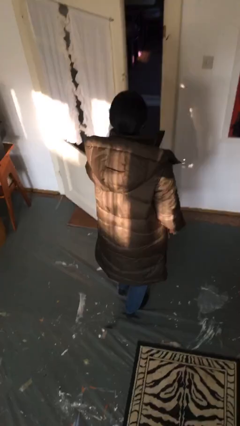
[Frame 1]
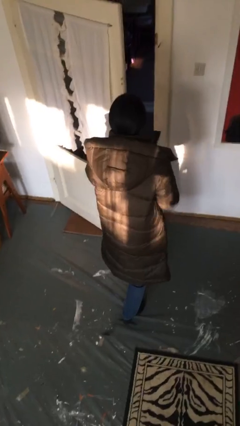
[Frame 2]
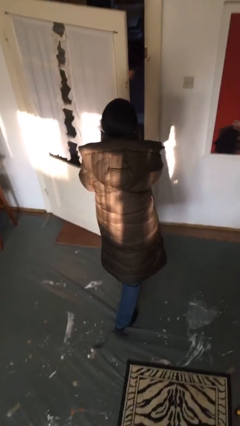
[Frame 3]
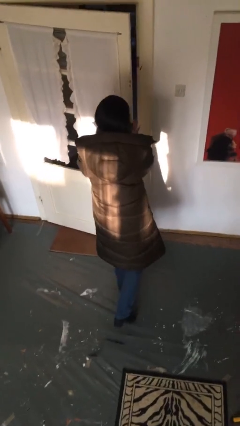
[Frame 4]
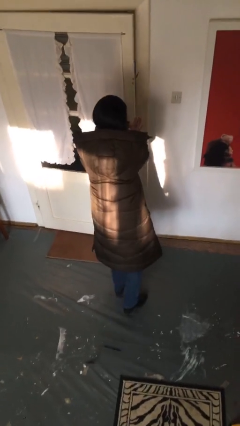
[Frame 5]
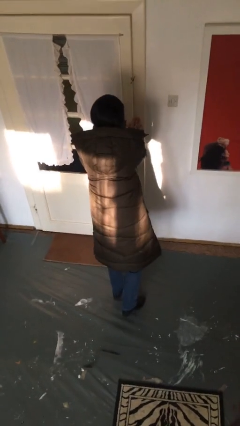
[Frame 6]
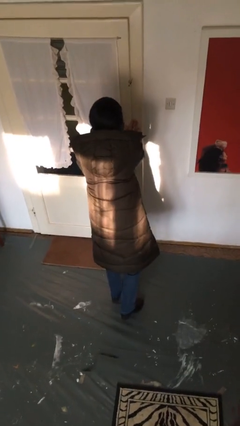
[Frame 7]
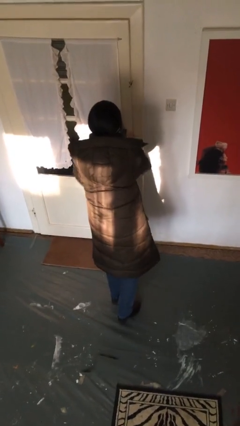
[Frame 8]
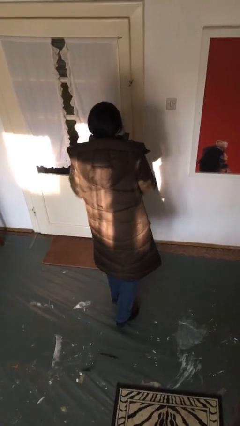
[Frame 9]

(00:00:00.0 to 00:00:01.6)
person closes facility door

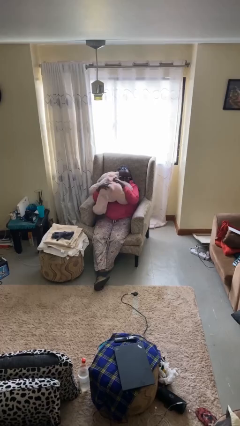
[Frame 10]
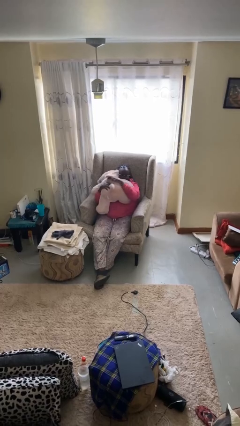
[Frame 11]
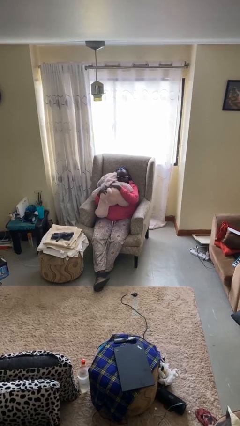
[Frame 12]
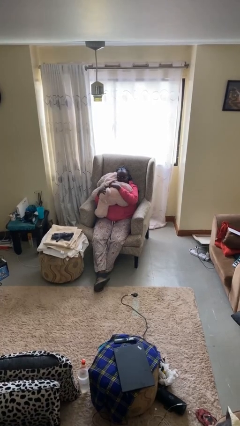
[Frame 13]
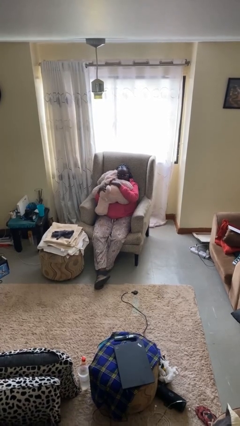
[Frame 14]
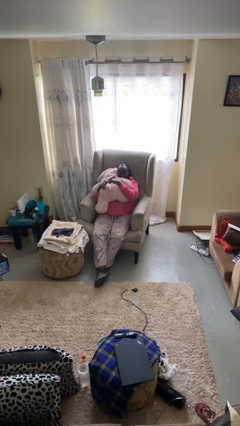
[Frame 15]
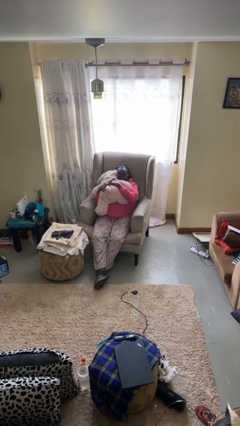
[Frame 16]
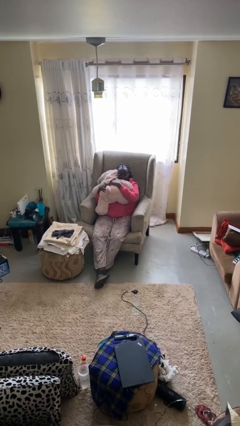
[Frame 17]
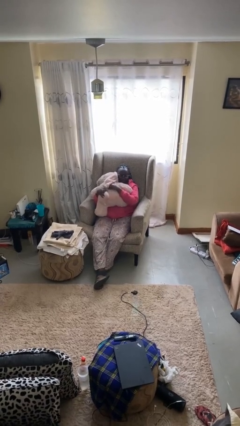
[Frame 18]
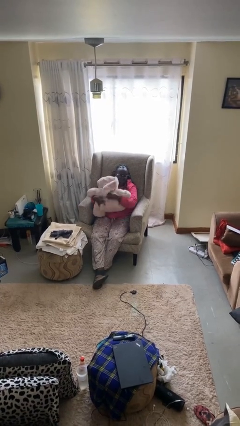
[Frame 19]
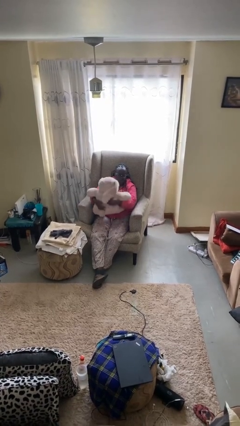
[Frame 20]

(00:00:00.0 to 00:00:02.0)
person hugs stuffed animal

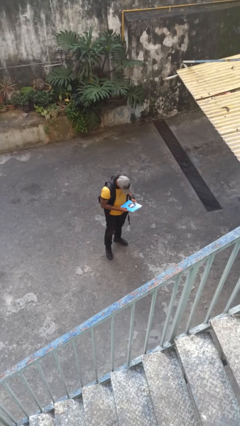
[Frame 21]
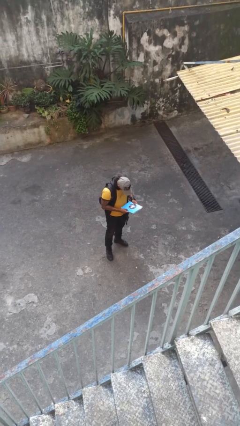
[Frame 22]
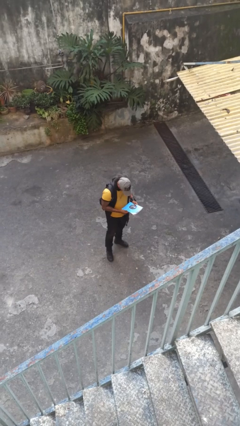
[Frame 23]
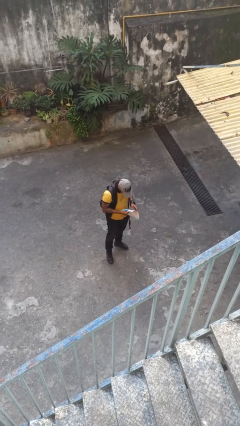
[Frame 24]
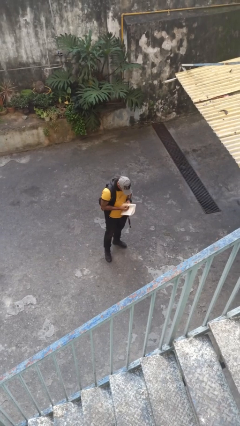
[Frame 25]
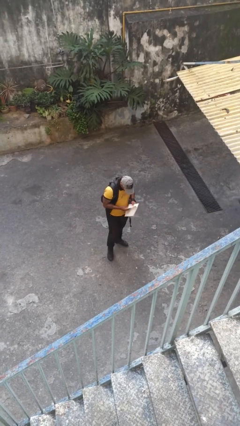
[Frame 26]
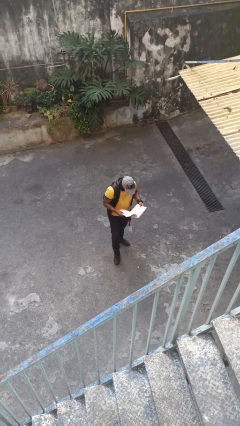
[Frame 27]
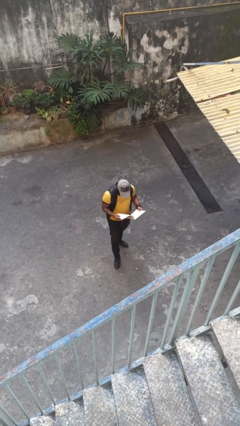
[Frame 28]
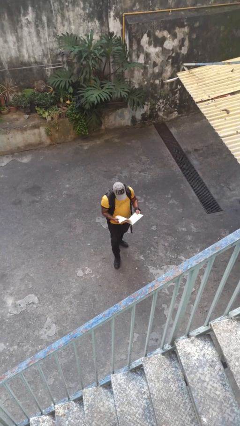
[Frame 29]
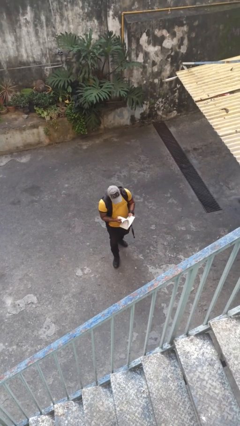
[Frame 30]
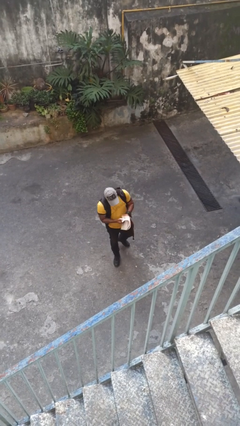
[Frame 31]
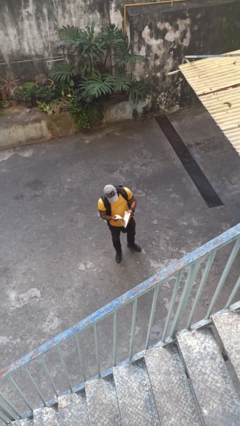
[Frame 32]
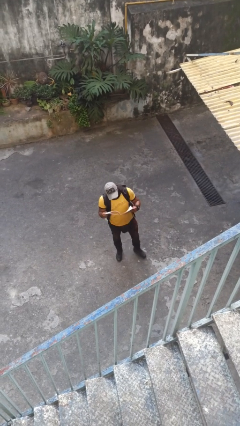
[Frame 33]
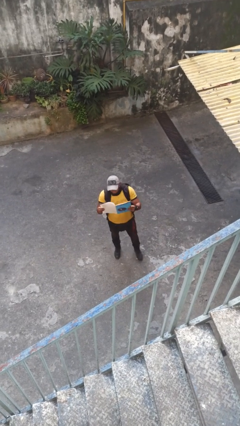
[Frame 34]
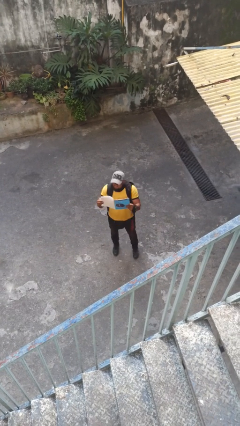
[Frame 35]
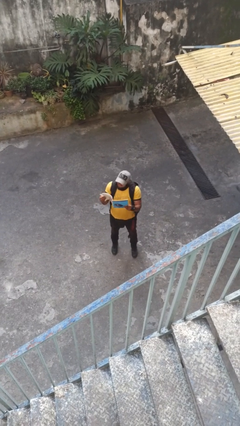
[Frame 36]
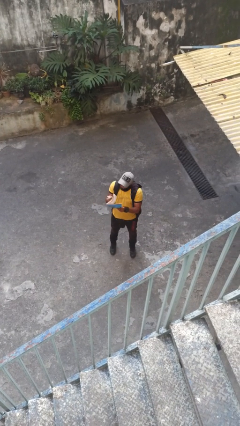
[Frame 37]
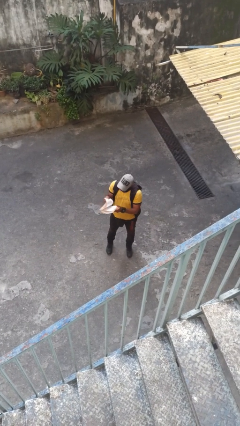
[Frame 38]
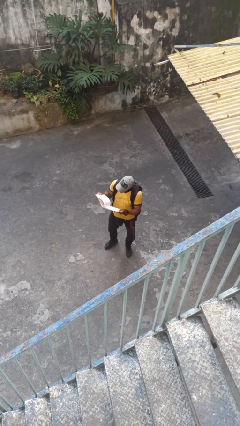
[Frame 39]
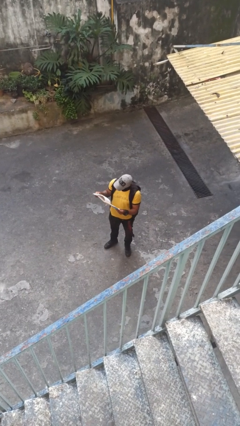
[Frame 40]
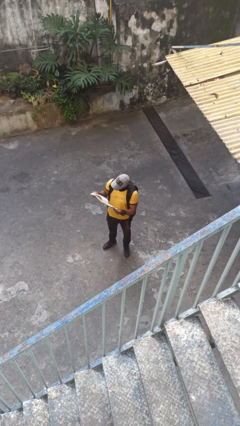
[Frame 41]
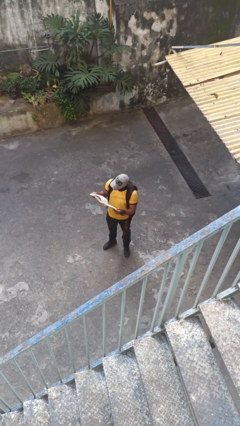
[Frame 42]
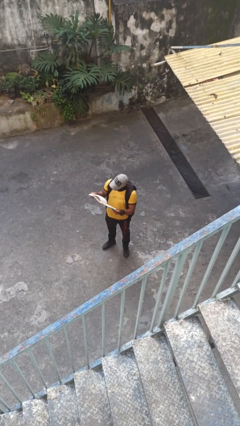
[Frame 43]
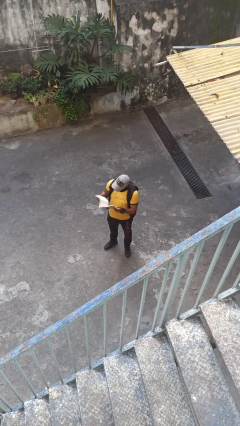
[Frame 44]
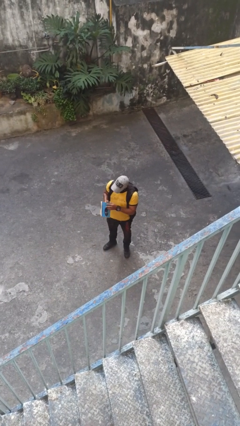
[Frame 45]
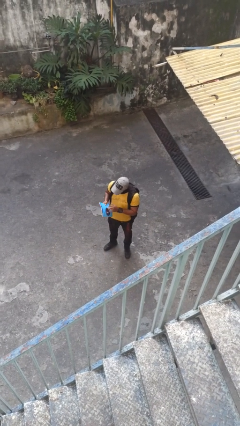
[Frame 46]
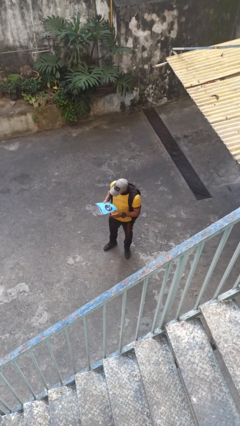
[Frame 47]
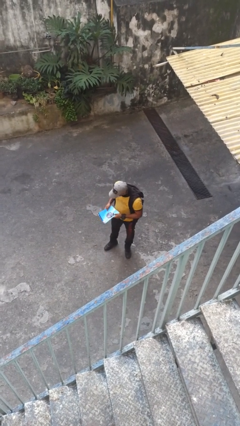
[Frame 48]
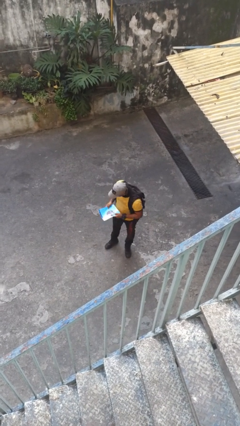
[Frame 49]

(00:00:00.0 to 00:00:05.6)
person reads document

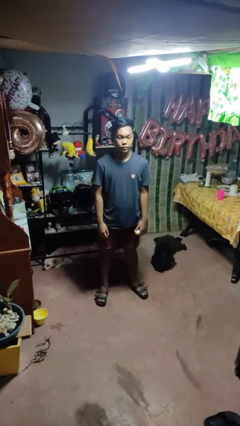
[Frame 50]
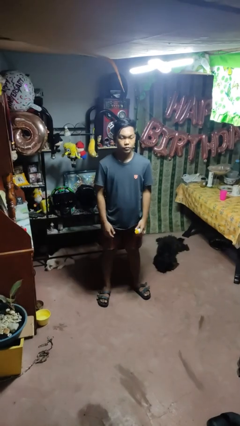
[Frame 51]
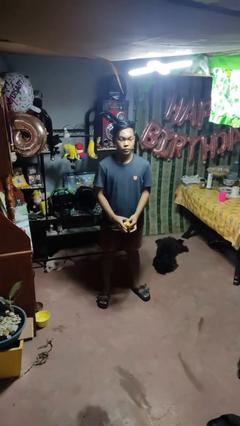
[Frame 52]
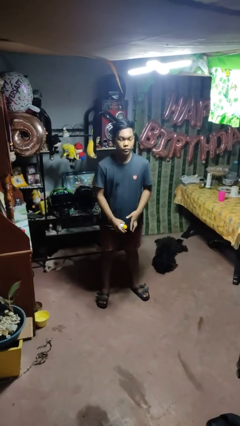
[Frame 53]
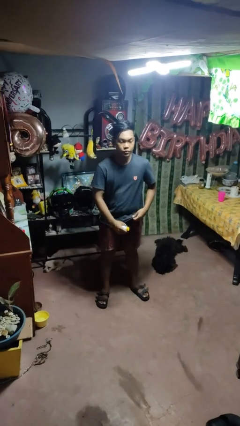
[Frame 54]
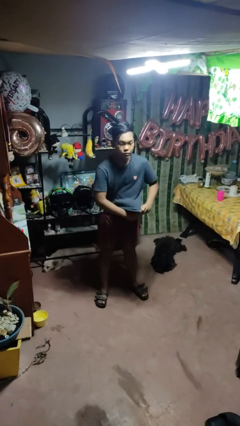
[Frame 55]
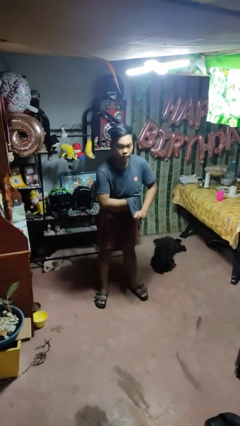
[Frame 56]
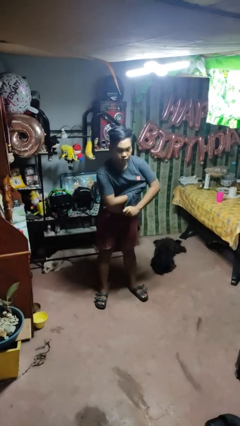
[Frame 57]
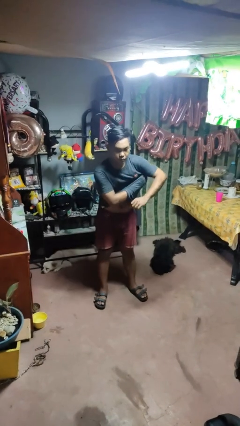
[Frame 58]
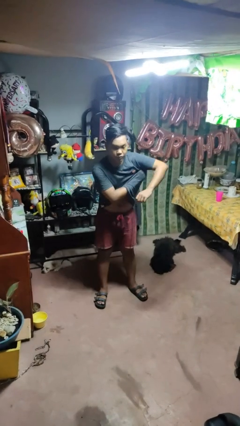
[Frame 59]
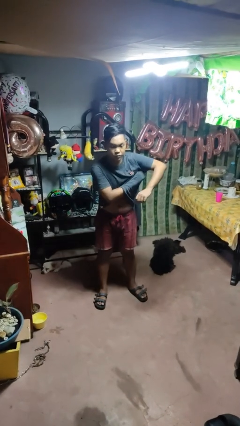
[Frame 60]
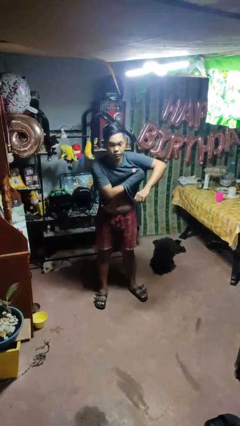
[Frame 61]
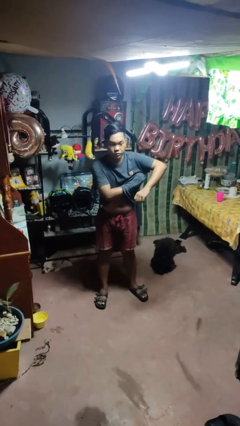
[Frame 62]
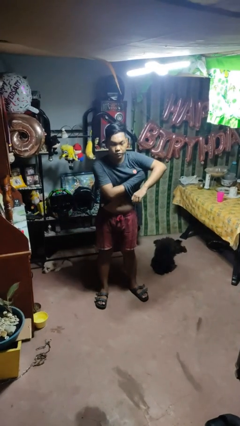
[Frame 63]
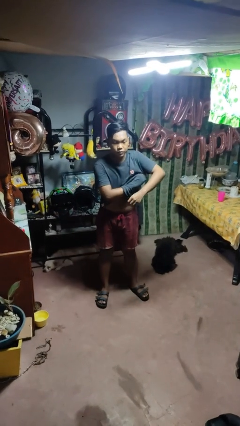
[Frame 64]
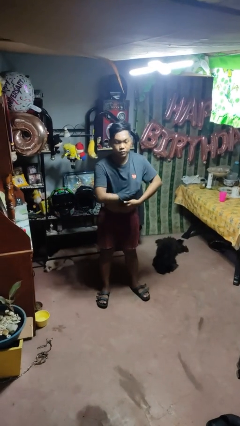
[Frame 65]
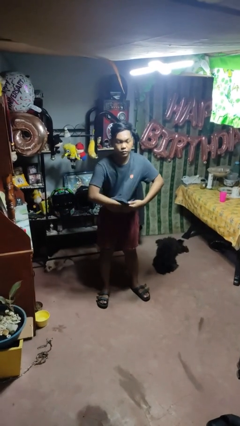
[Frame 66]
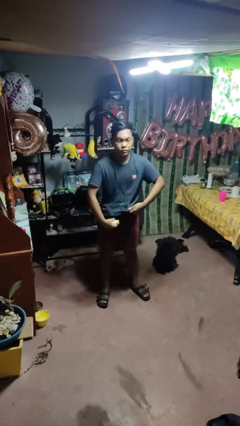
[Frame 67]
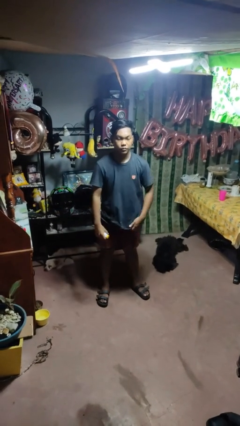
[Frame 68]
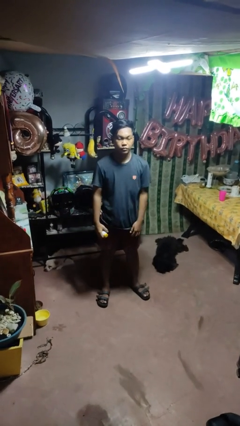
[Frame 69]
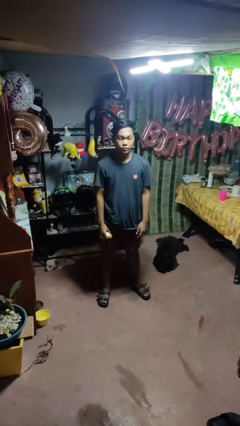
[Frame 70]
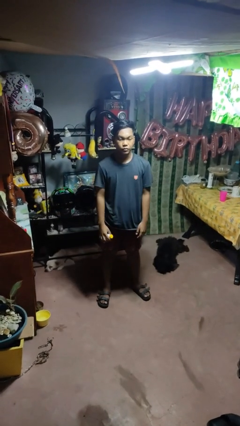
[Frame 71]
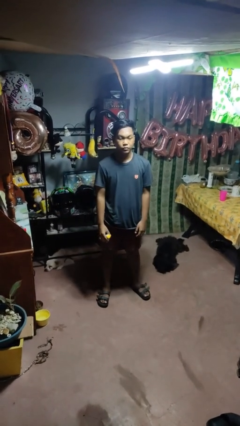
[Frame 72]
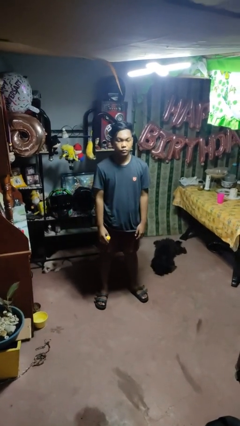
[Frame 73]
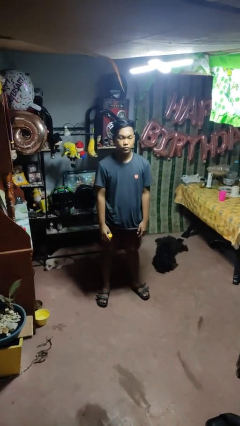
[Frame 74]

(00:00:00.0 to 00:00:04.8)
person applies deodorant

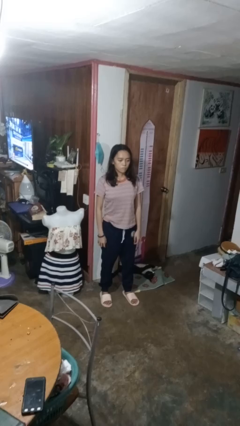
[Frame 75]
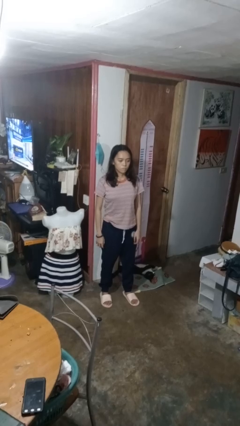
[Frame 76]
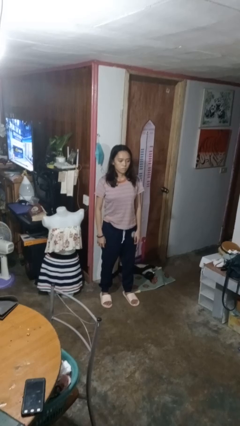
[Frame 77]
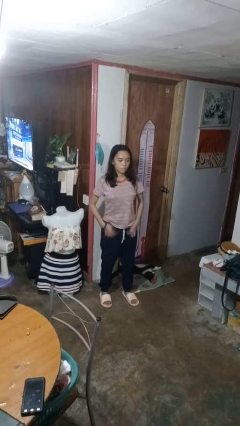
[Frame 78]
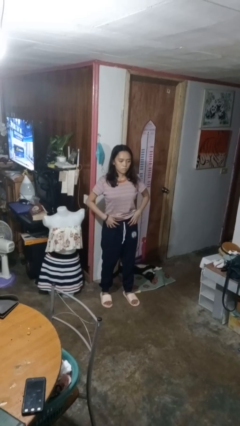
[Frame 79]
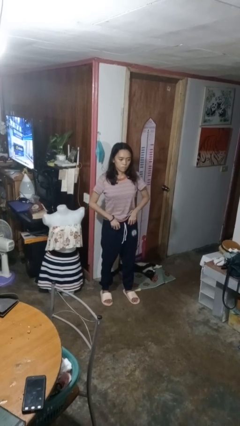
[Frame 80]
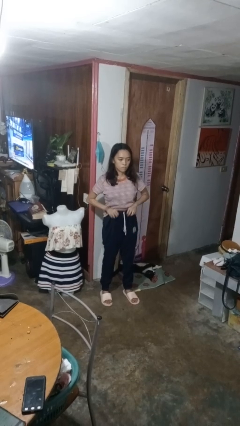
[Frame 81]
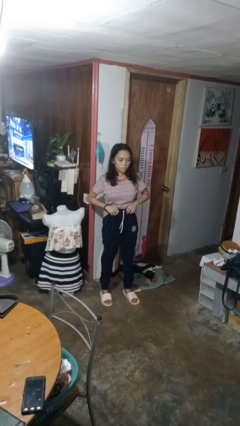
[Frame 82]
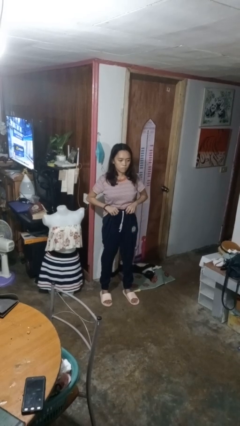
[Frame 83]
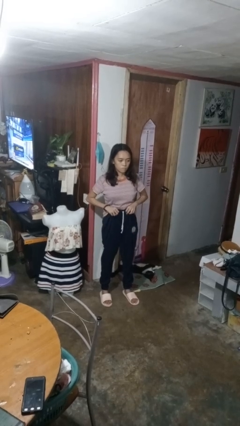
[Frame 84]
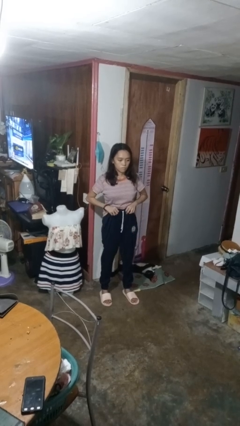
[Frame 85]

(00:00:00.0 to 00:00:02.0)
person hikes up pants

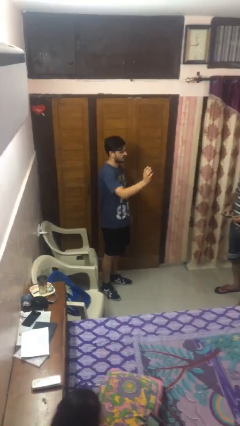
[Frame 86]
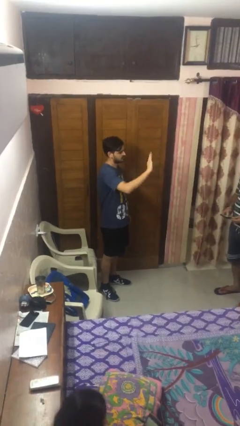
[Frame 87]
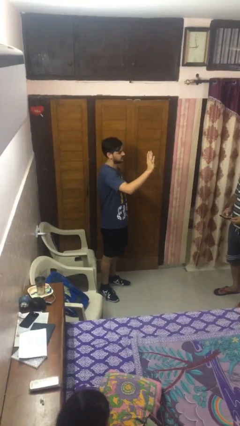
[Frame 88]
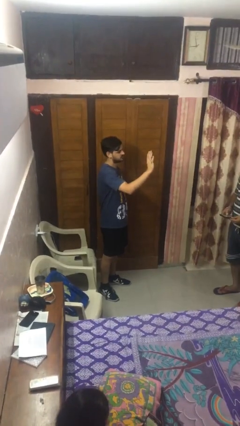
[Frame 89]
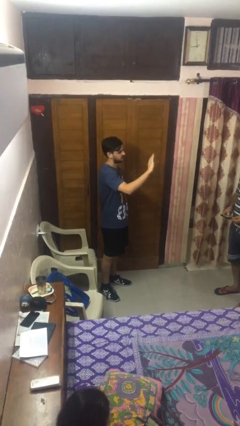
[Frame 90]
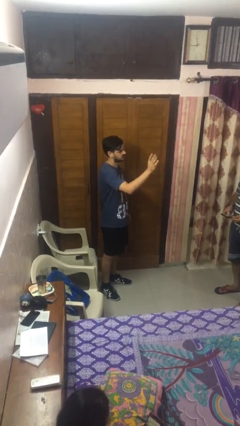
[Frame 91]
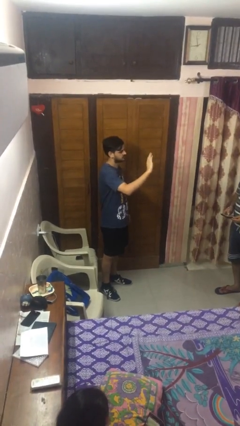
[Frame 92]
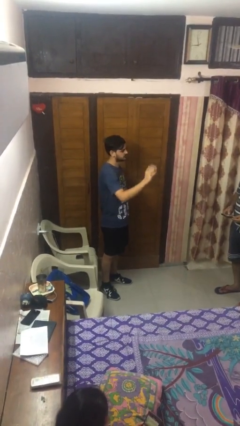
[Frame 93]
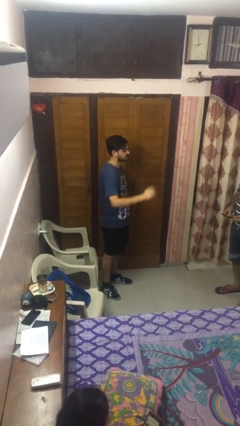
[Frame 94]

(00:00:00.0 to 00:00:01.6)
person waves at person
